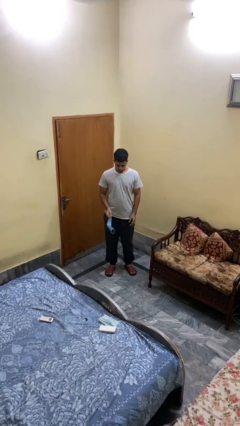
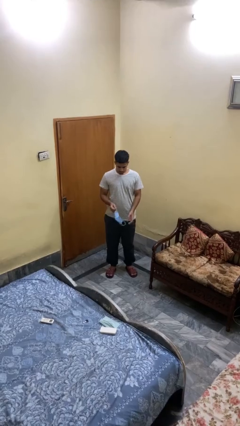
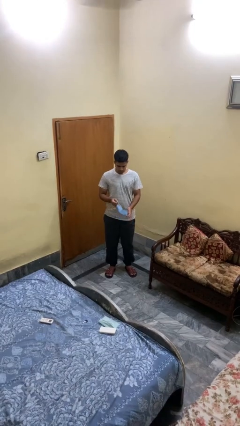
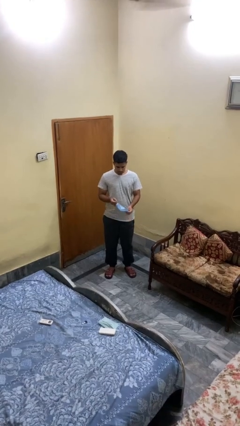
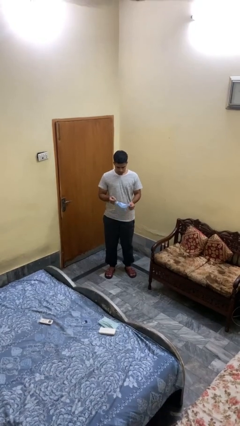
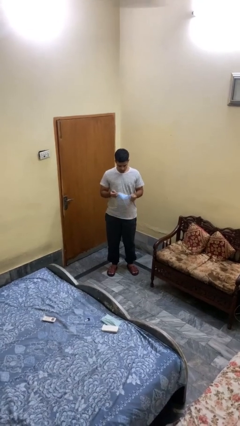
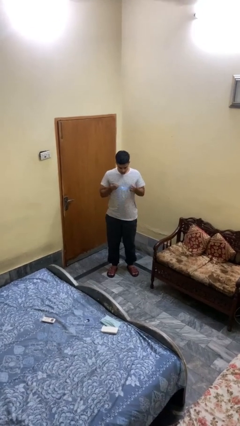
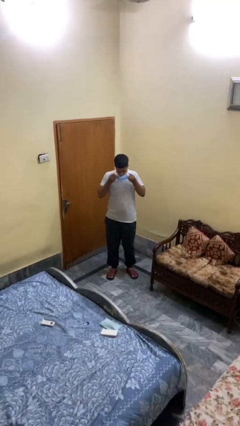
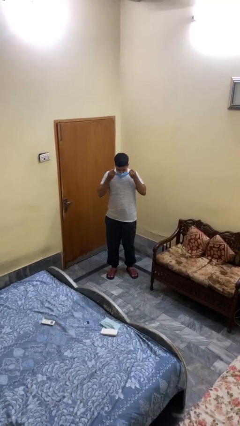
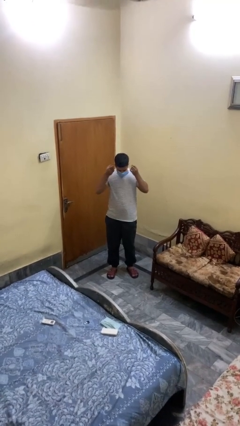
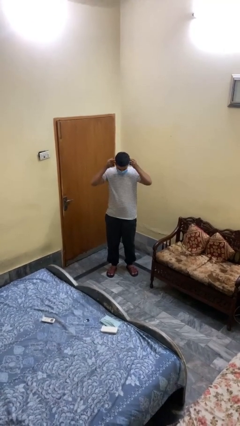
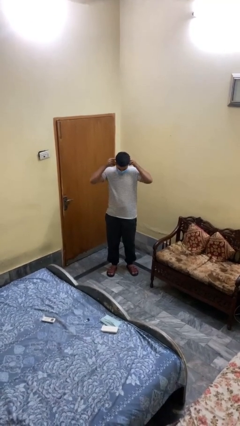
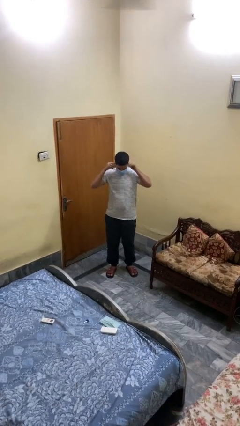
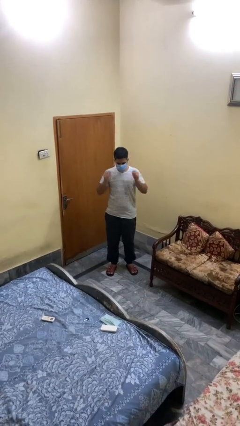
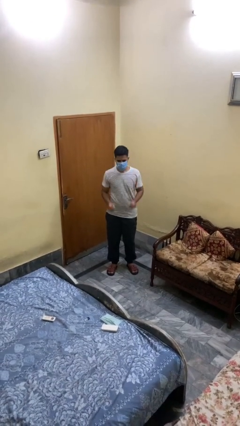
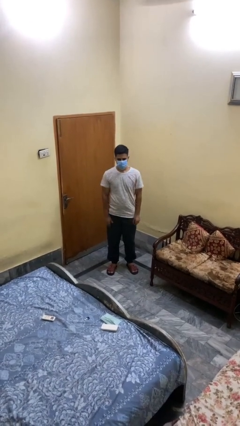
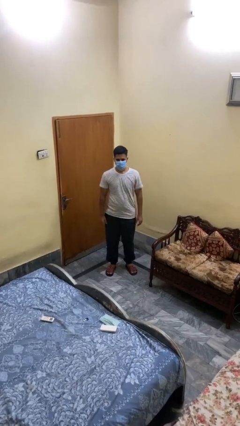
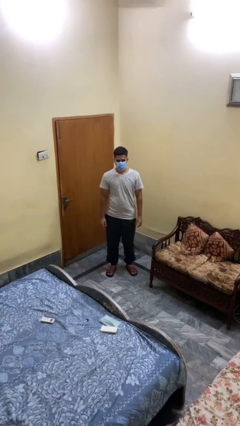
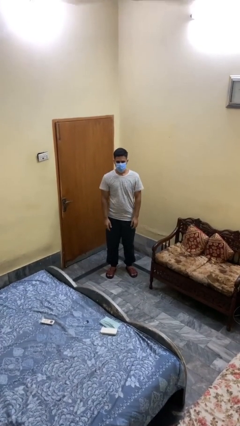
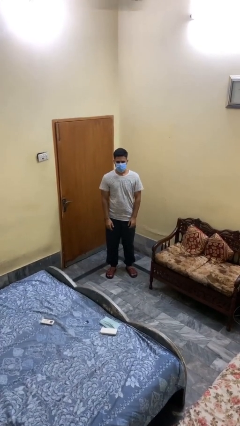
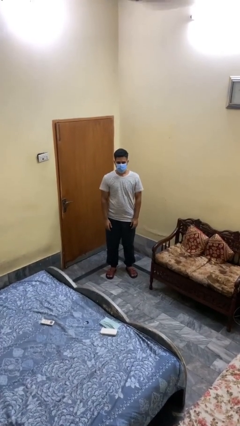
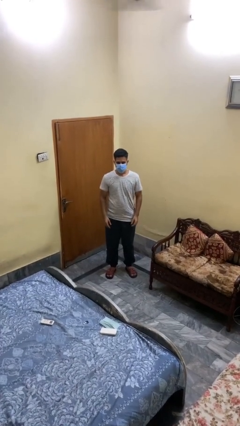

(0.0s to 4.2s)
person puts on facemask

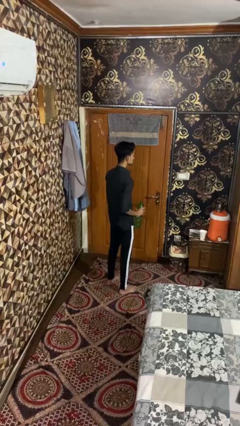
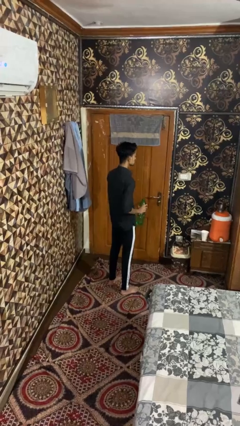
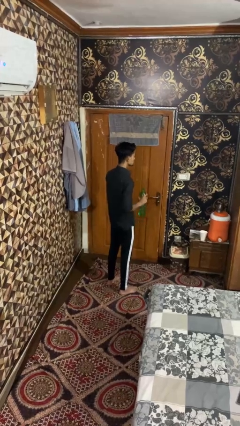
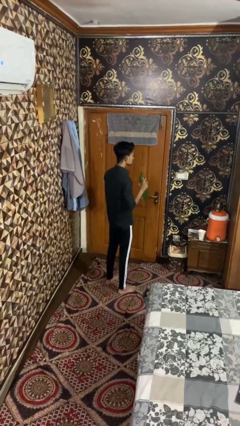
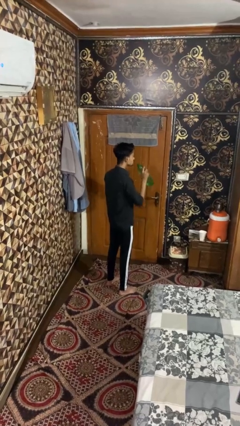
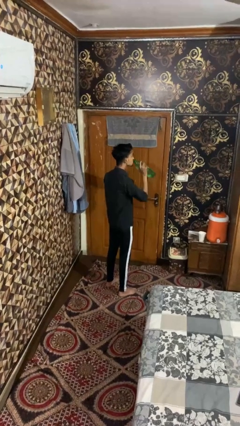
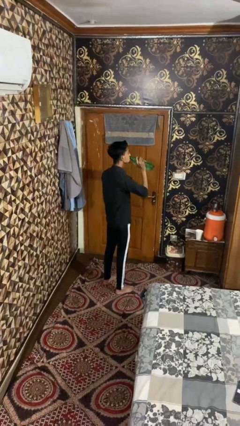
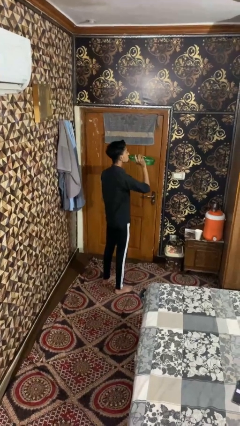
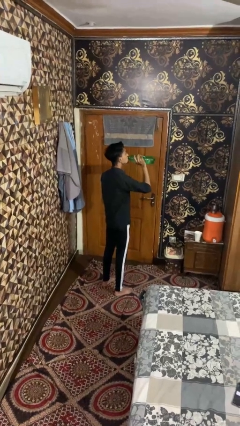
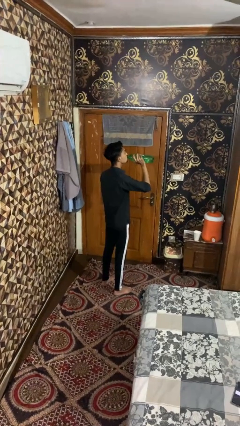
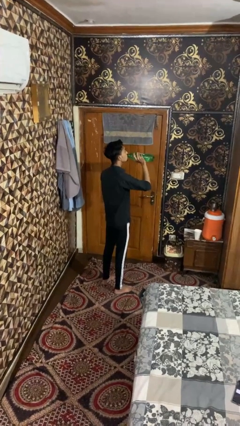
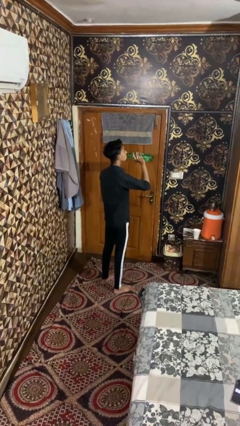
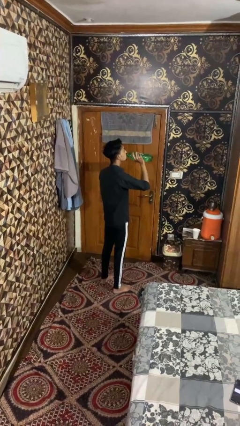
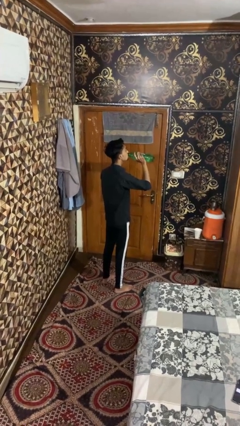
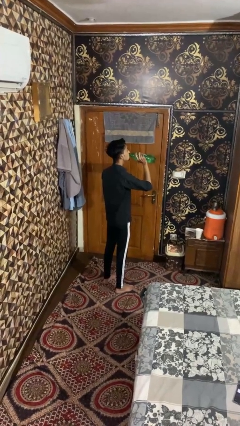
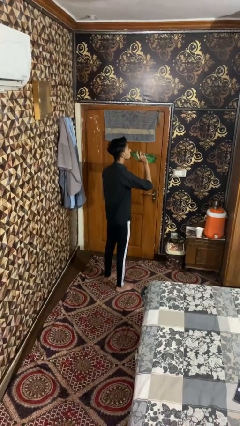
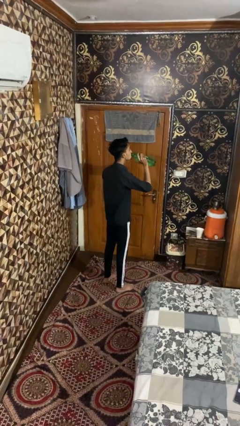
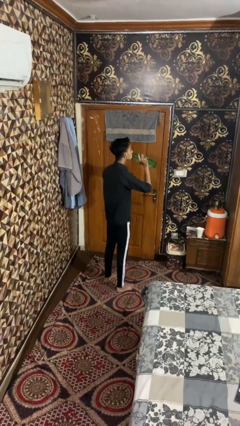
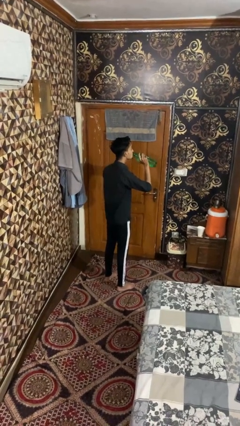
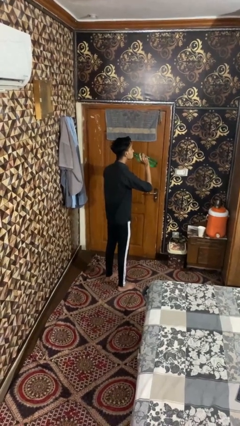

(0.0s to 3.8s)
person drinks from bottle

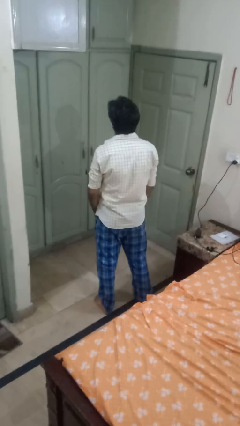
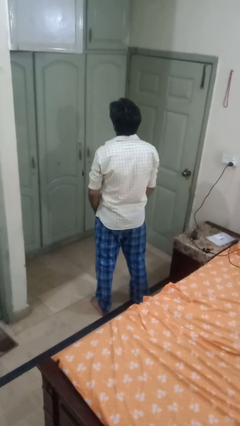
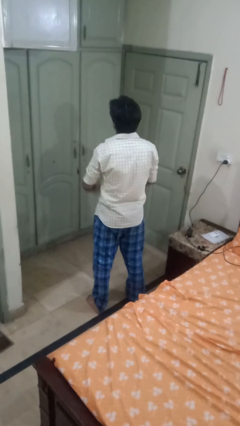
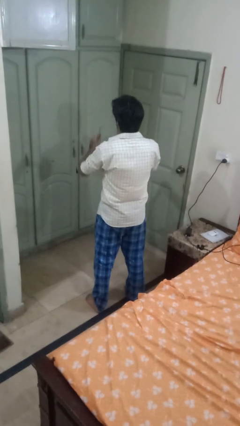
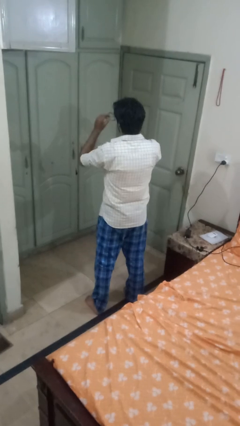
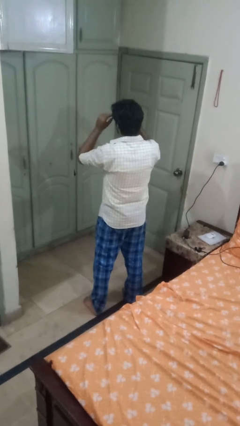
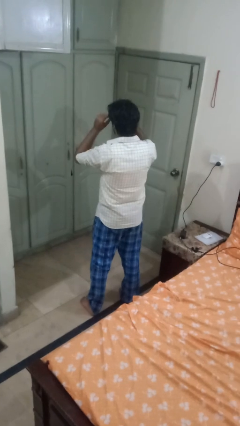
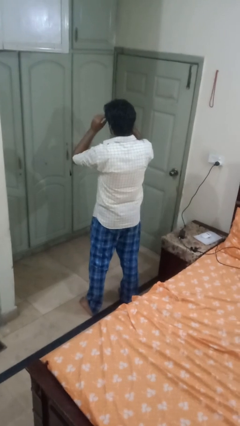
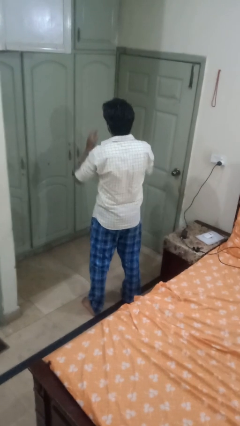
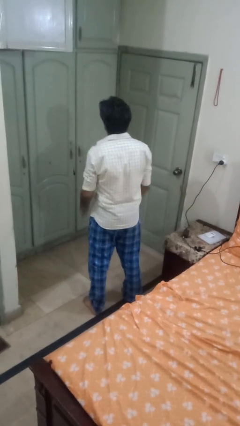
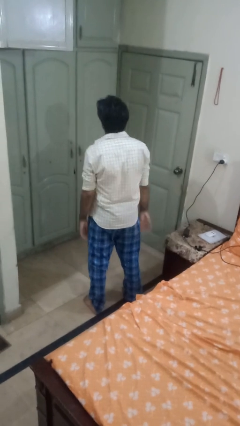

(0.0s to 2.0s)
person puts on glasses

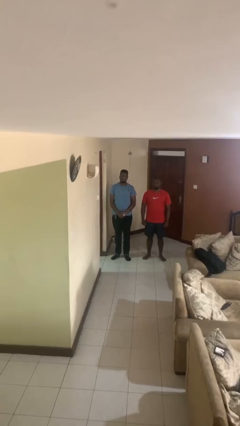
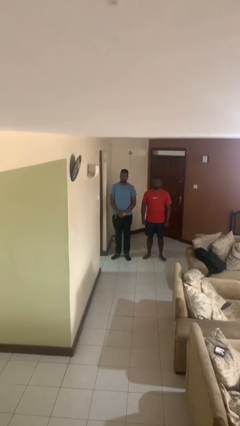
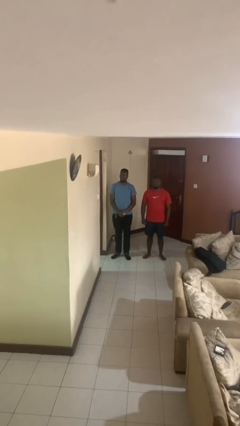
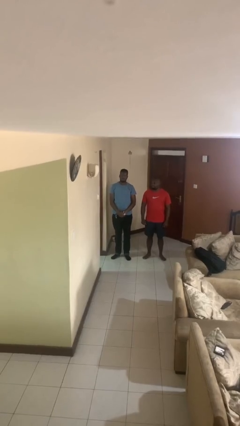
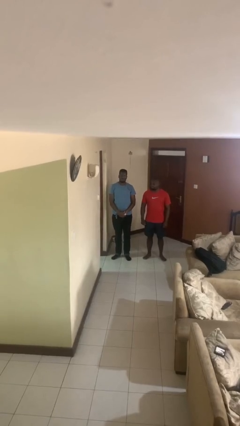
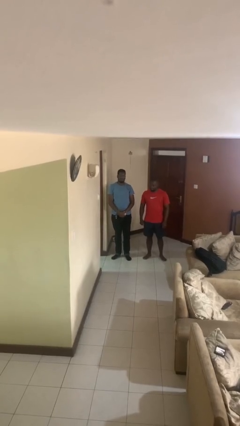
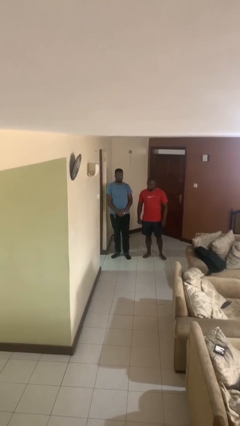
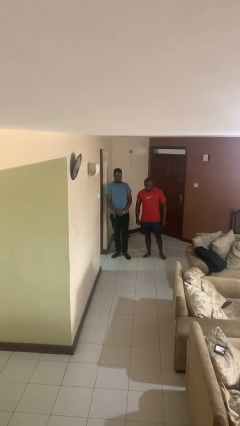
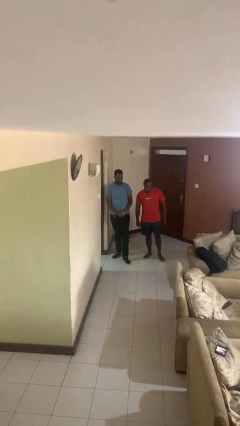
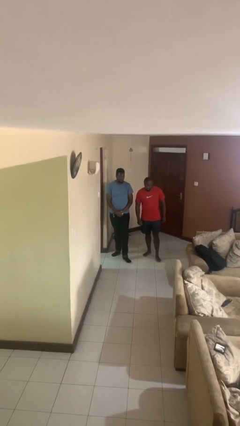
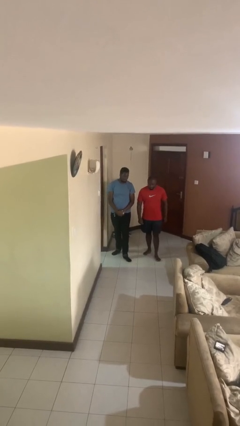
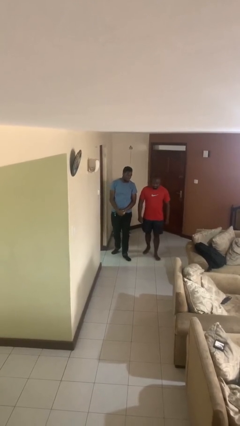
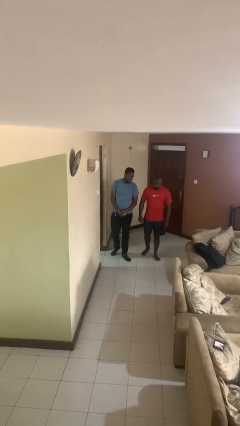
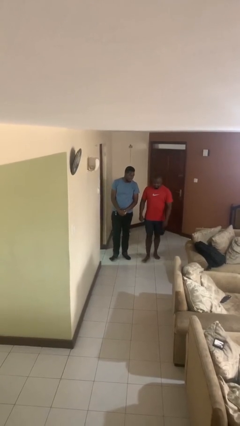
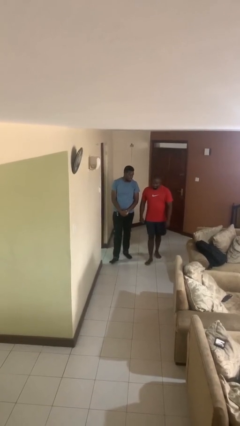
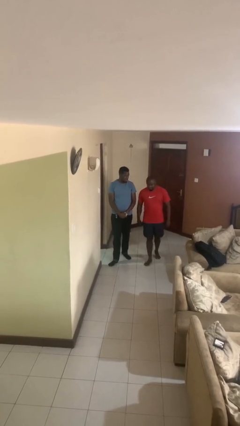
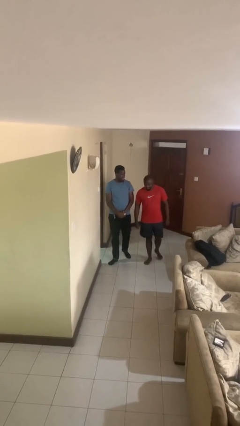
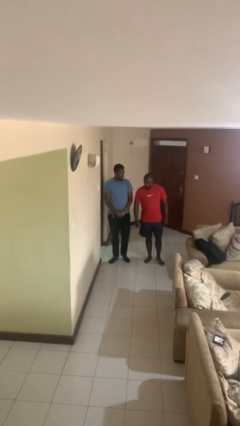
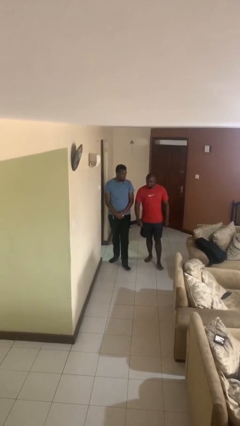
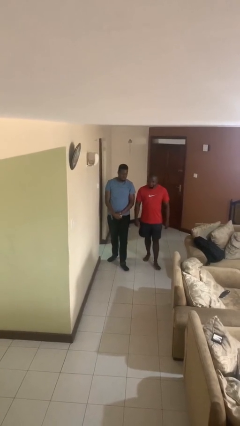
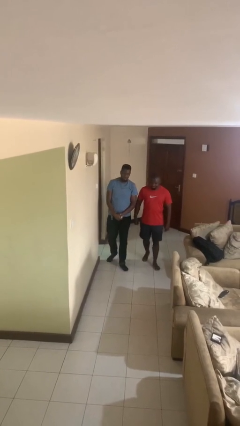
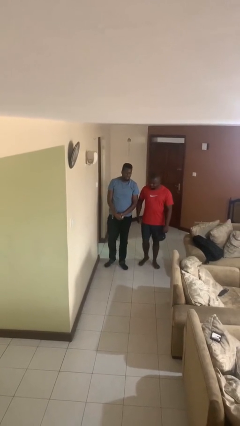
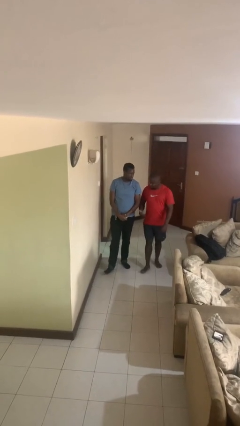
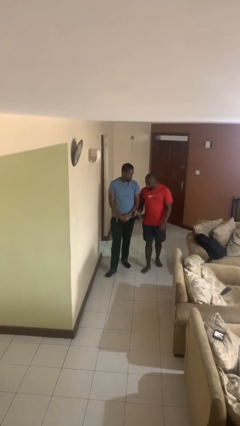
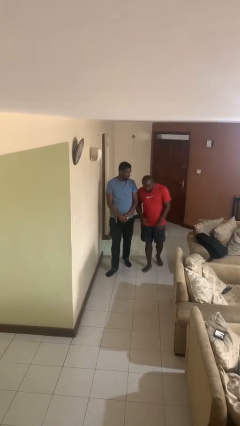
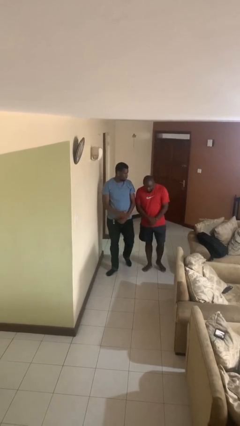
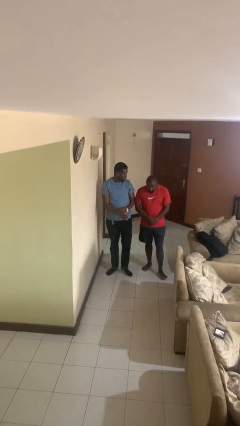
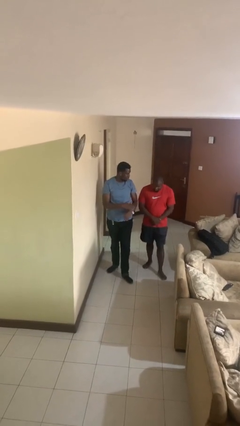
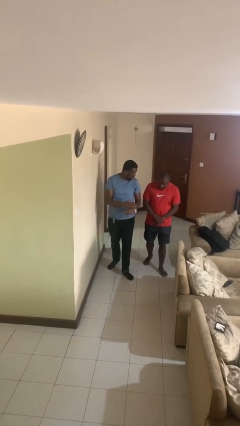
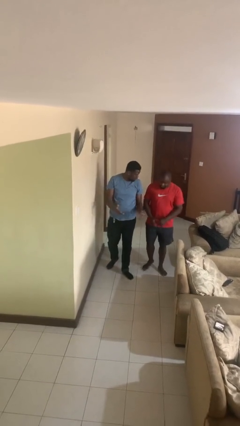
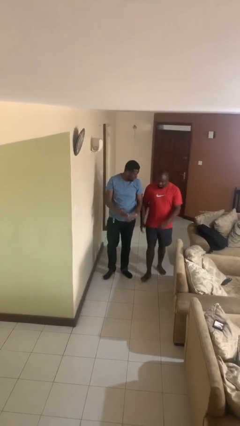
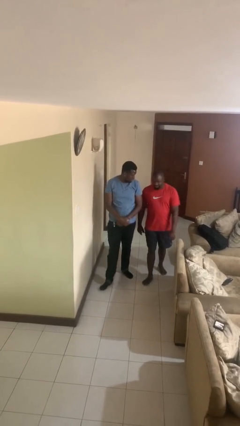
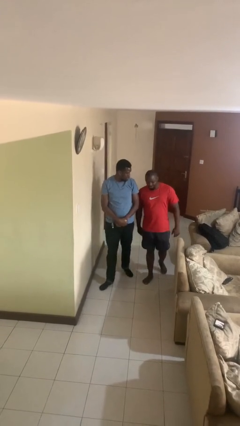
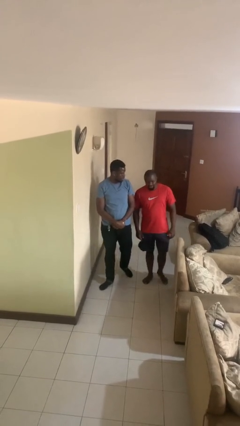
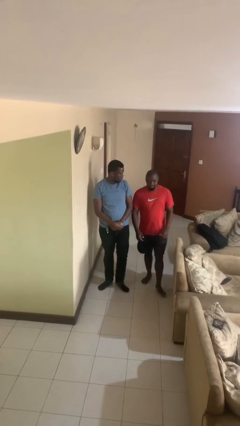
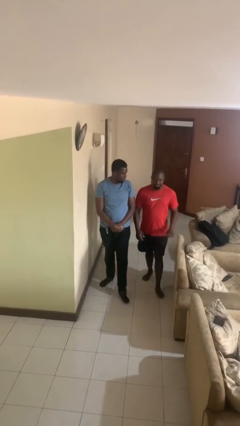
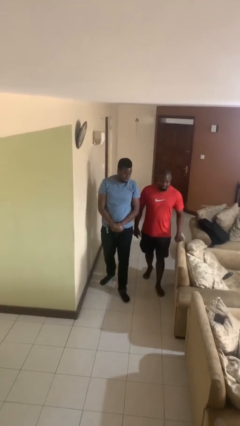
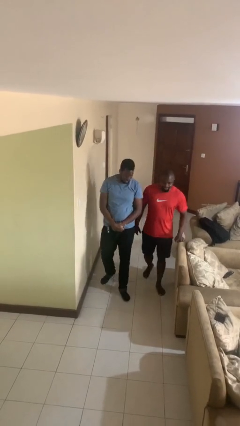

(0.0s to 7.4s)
person talks to person

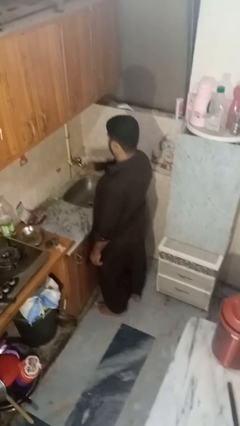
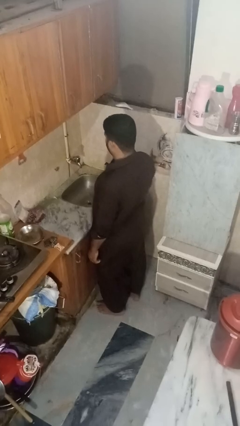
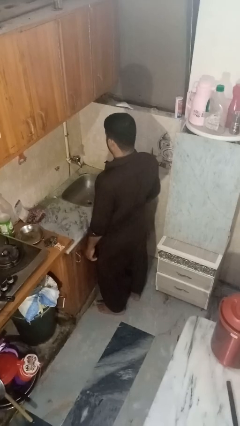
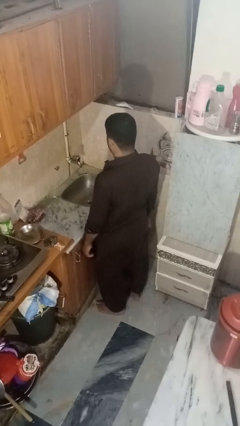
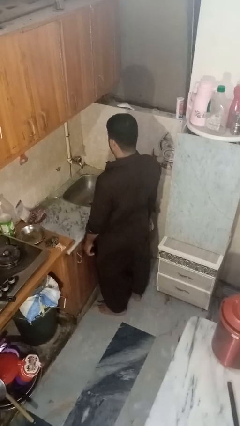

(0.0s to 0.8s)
person turns off faucet
